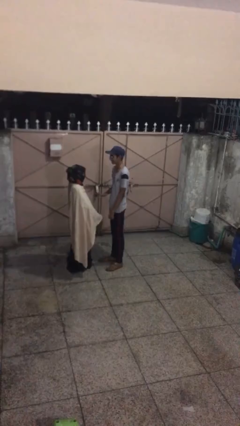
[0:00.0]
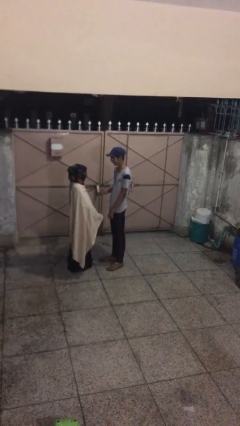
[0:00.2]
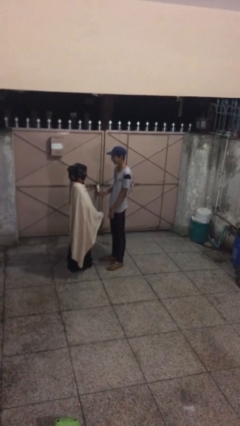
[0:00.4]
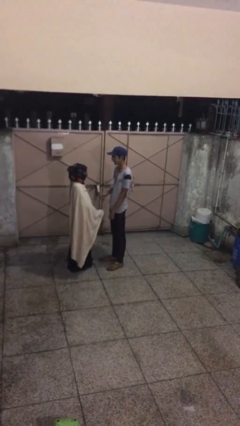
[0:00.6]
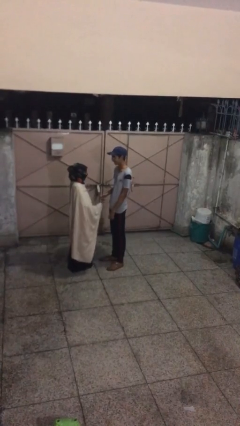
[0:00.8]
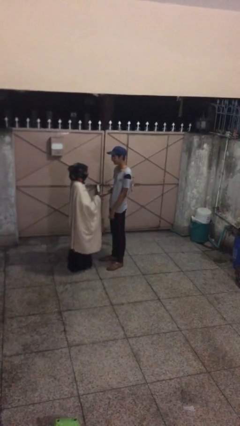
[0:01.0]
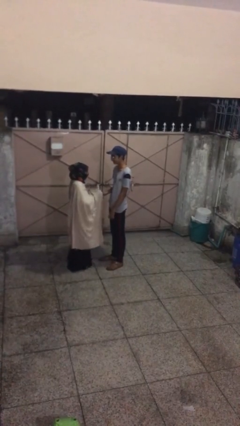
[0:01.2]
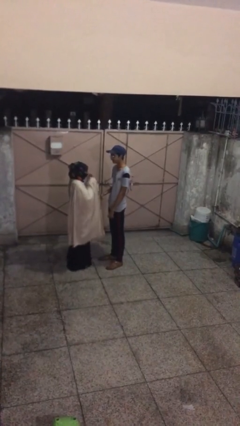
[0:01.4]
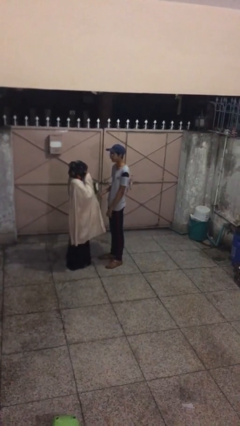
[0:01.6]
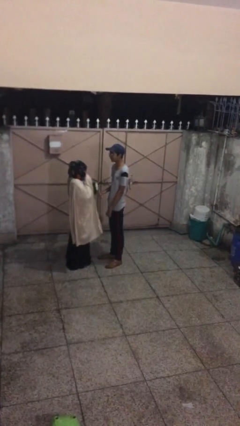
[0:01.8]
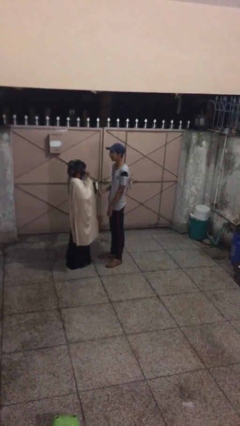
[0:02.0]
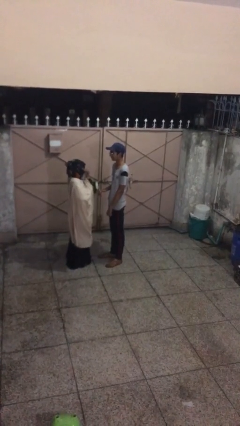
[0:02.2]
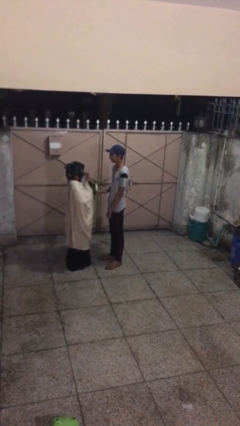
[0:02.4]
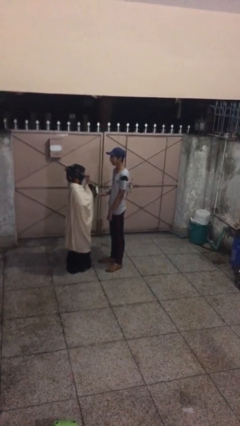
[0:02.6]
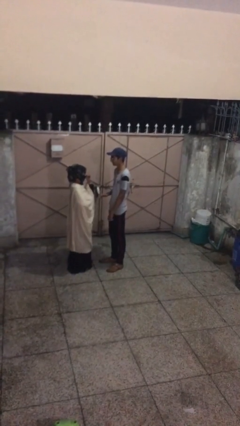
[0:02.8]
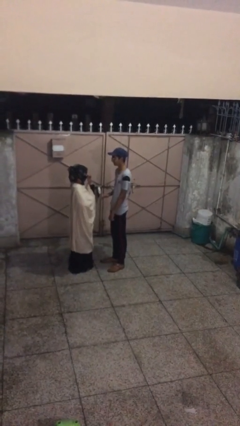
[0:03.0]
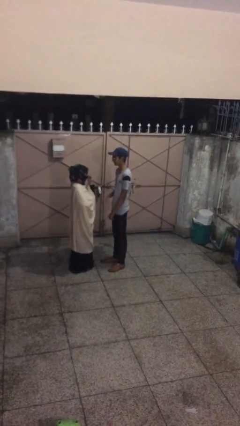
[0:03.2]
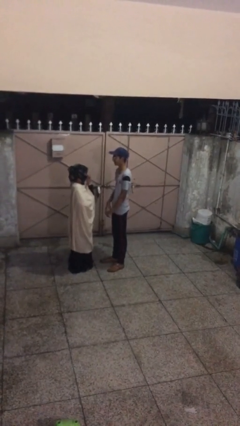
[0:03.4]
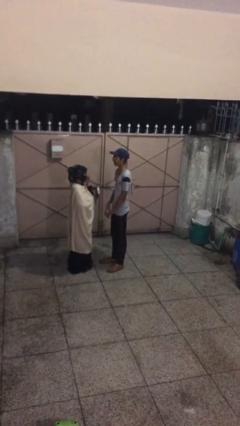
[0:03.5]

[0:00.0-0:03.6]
person talks to person

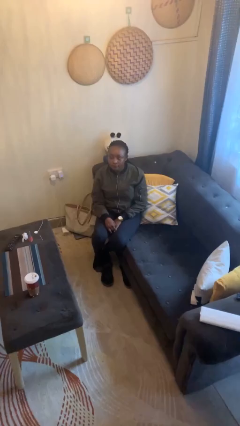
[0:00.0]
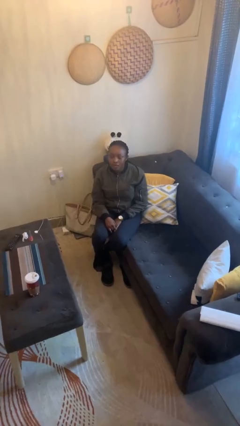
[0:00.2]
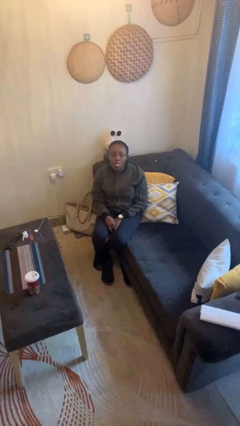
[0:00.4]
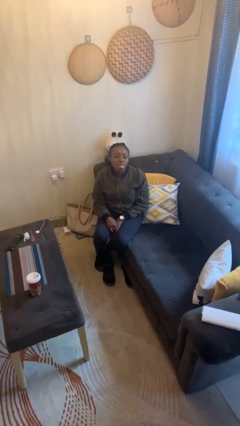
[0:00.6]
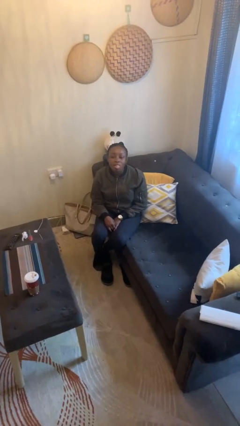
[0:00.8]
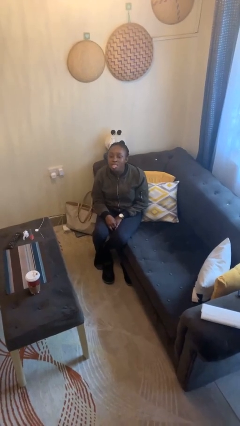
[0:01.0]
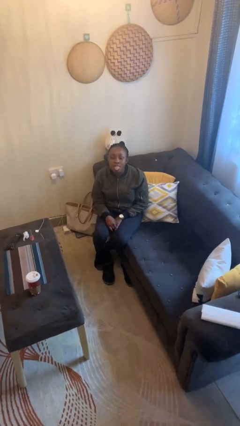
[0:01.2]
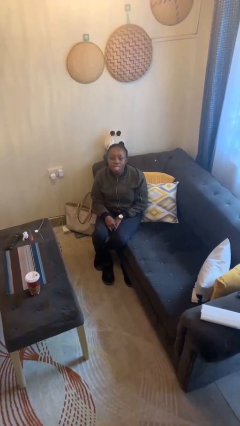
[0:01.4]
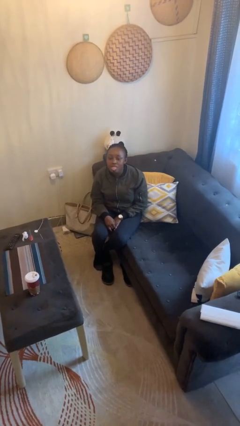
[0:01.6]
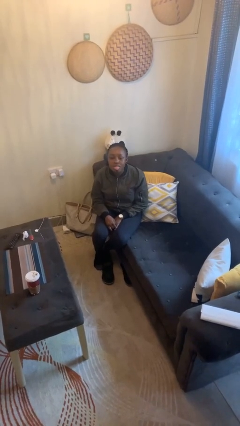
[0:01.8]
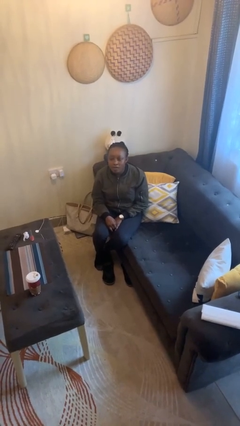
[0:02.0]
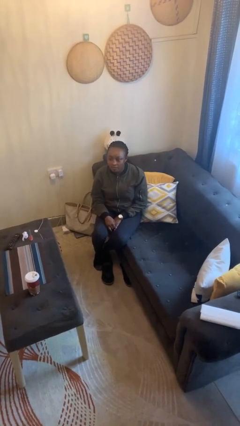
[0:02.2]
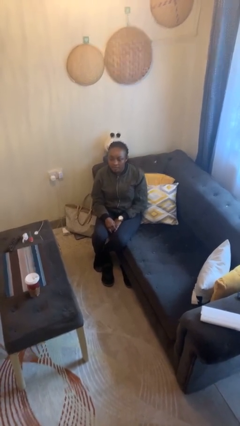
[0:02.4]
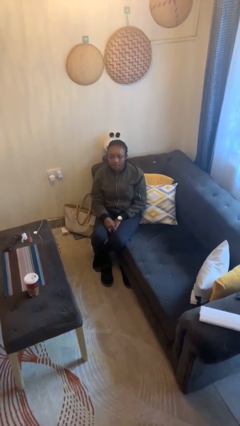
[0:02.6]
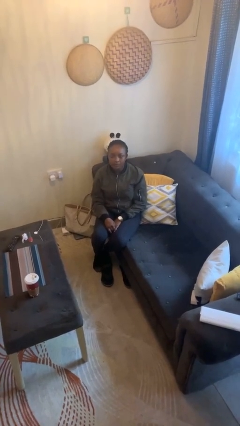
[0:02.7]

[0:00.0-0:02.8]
person sticks out tongue

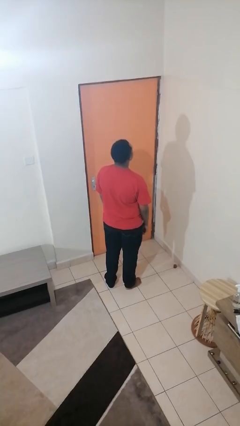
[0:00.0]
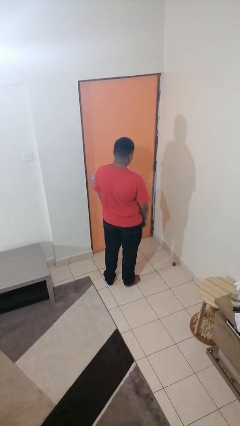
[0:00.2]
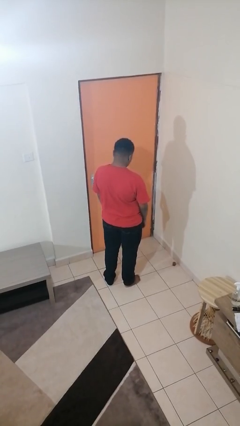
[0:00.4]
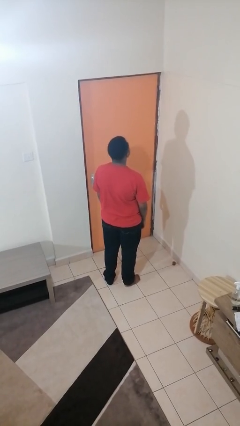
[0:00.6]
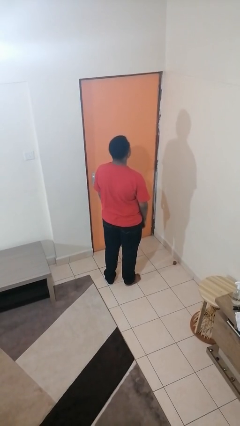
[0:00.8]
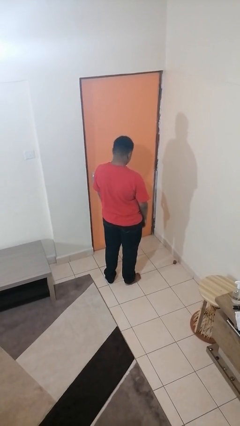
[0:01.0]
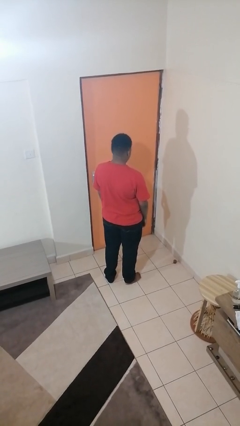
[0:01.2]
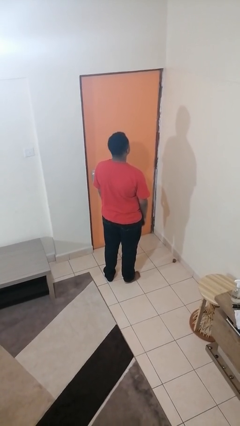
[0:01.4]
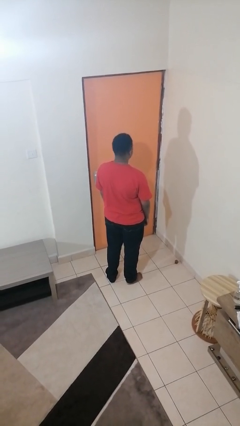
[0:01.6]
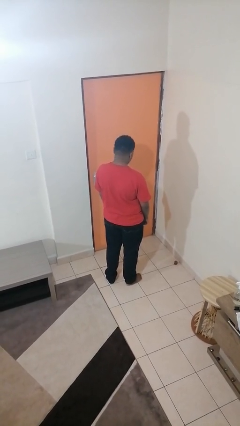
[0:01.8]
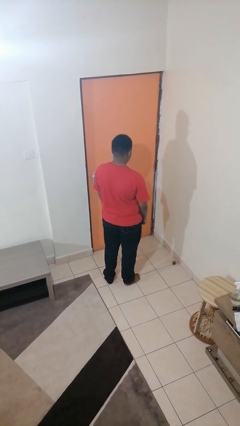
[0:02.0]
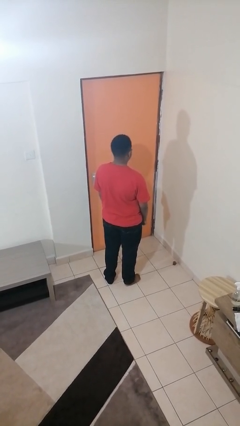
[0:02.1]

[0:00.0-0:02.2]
person nods head

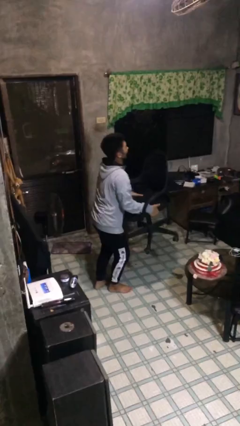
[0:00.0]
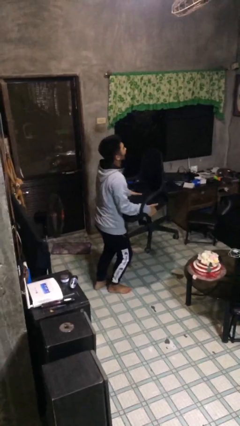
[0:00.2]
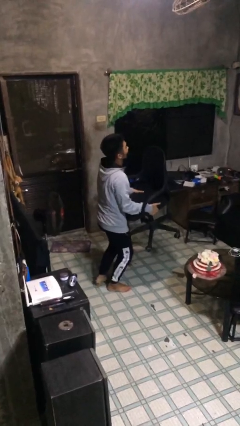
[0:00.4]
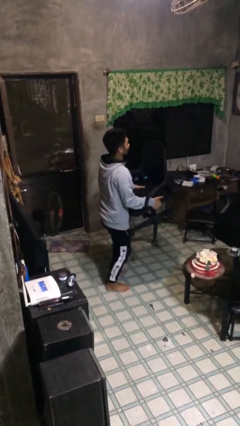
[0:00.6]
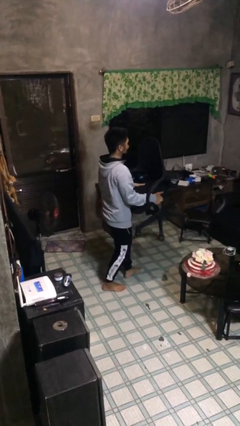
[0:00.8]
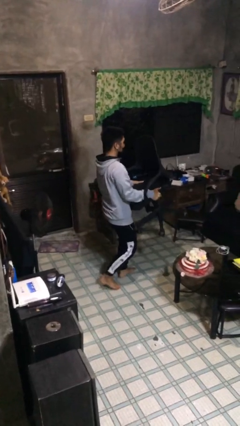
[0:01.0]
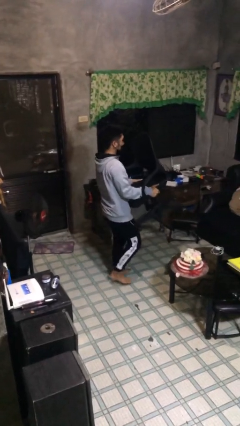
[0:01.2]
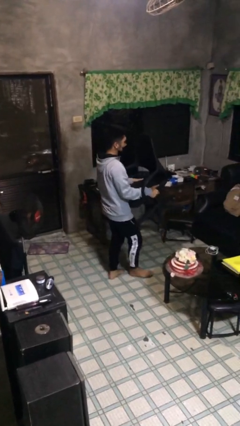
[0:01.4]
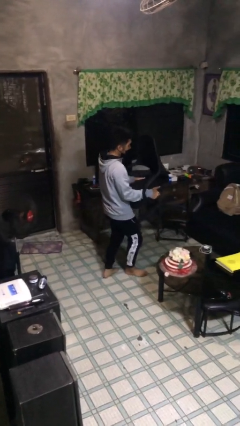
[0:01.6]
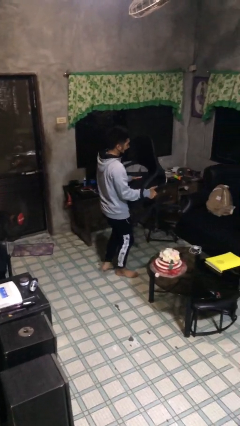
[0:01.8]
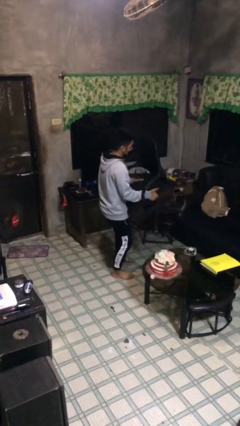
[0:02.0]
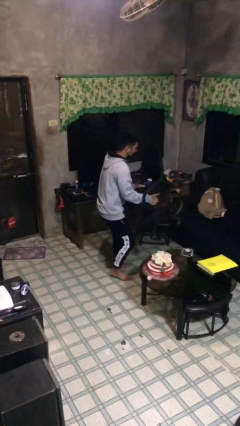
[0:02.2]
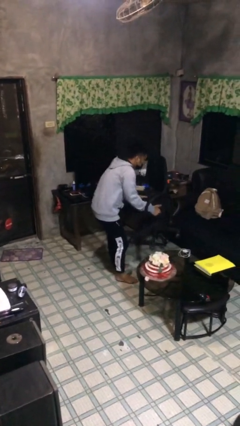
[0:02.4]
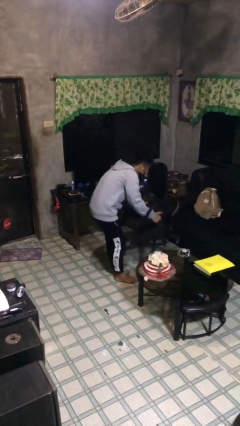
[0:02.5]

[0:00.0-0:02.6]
person carries heavy object

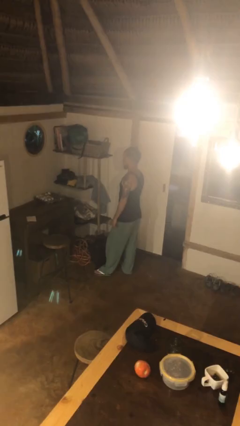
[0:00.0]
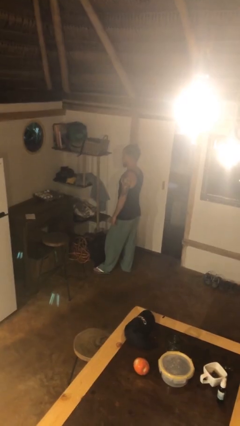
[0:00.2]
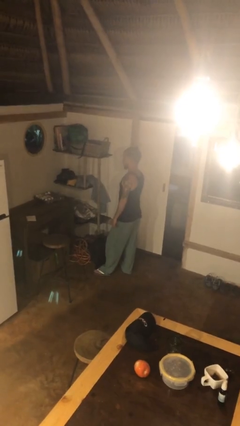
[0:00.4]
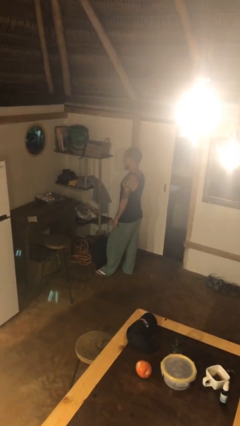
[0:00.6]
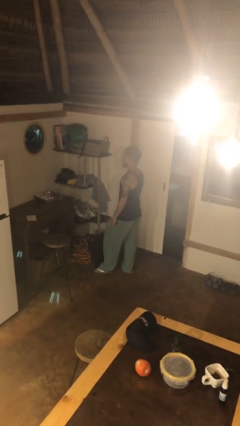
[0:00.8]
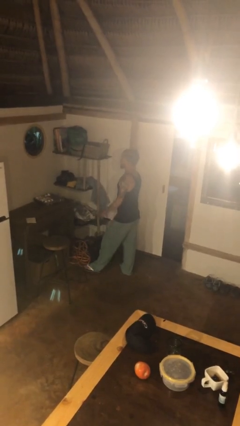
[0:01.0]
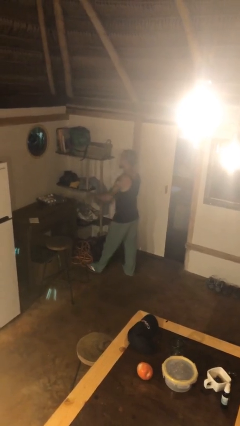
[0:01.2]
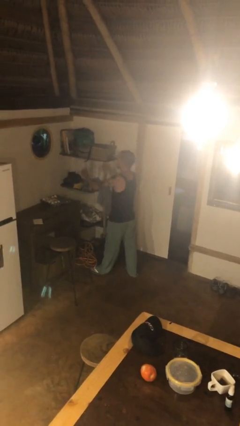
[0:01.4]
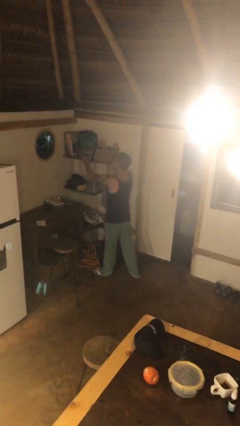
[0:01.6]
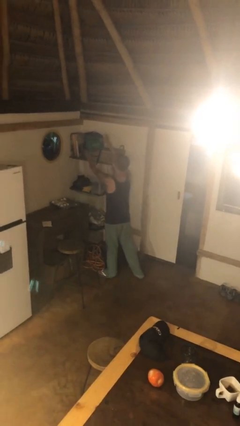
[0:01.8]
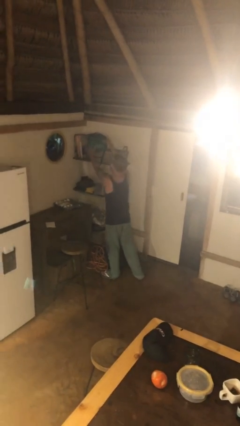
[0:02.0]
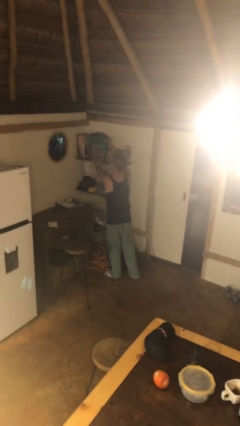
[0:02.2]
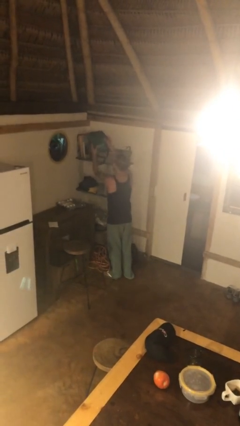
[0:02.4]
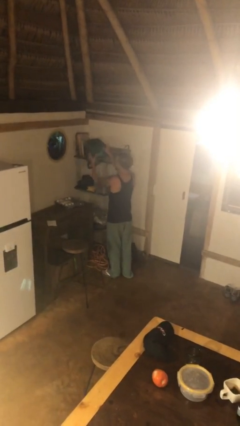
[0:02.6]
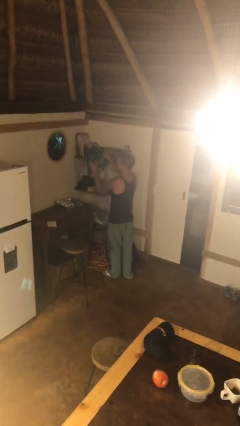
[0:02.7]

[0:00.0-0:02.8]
person picks up object from shelf

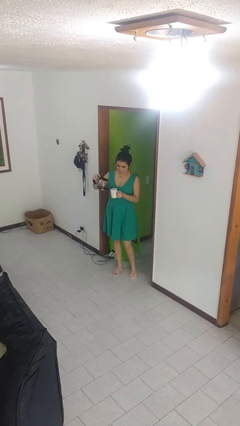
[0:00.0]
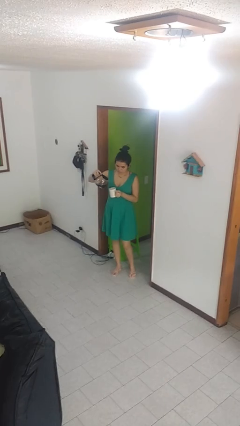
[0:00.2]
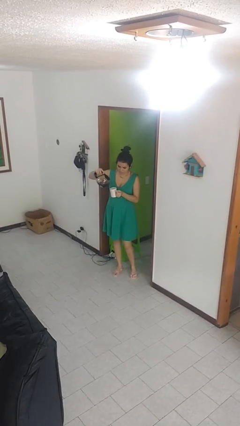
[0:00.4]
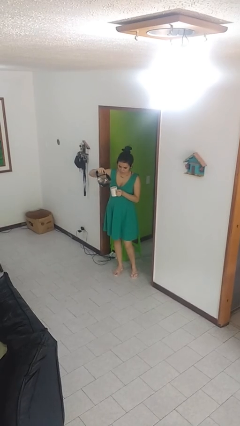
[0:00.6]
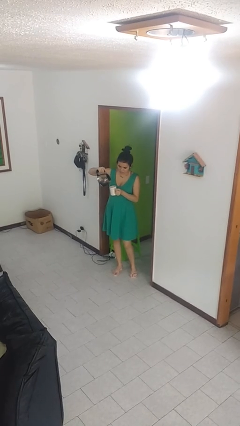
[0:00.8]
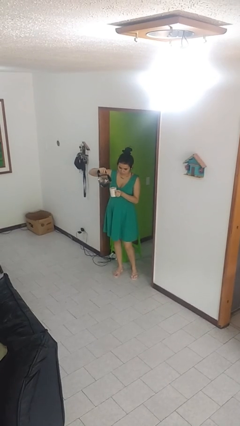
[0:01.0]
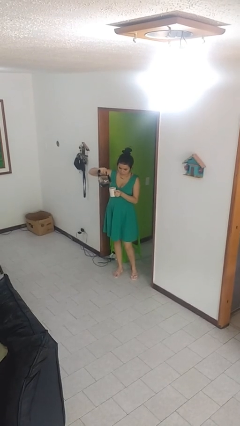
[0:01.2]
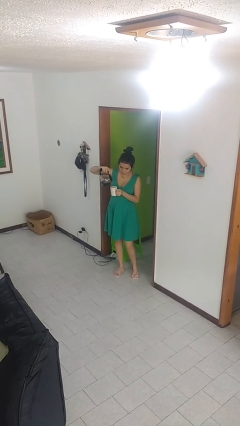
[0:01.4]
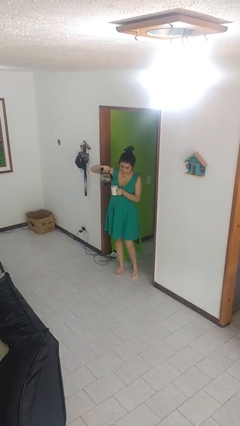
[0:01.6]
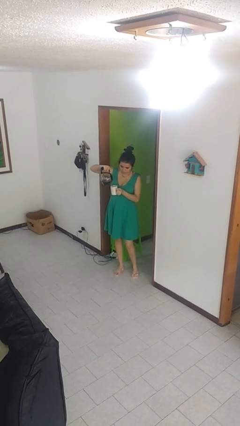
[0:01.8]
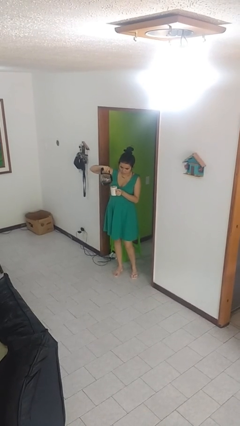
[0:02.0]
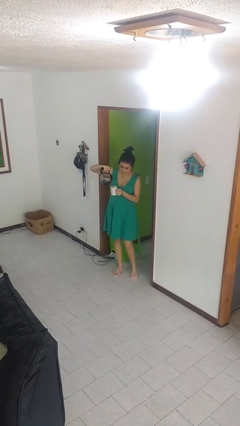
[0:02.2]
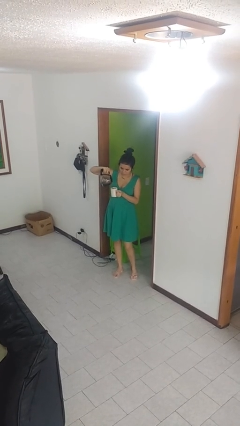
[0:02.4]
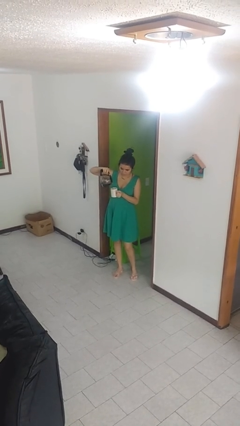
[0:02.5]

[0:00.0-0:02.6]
person pours coffee into mug

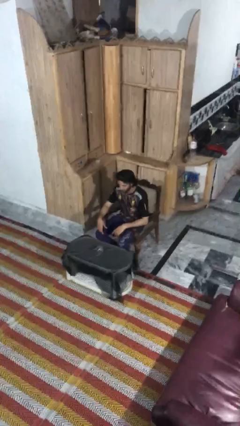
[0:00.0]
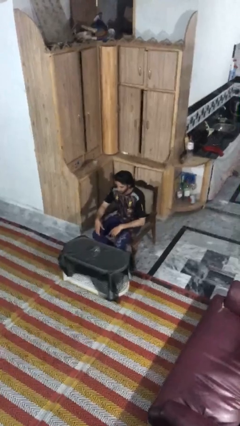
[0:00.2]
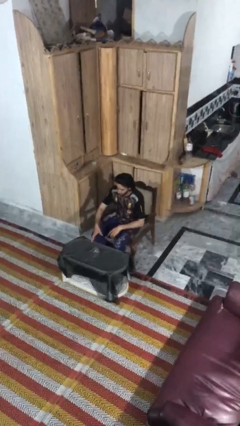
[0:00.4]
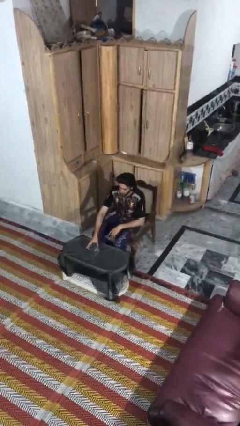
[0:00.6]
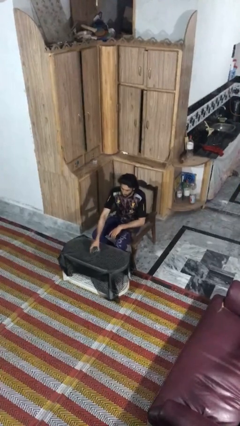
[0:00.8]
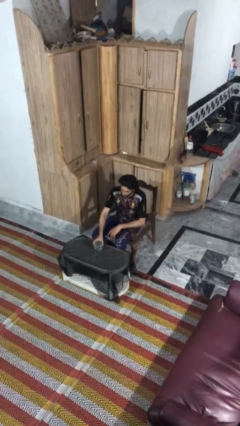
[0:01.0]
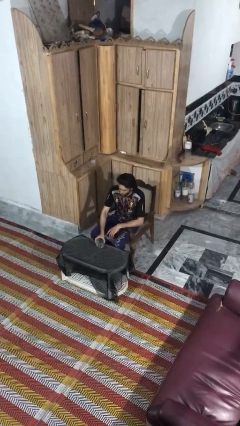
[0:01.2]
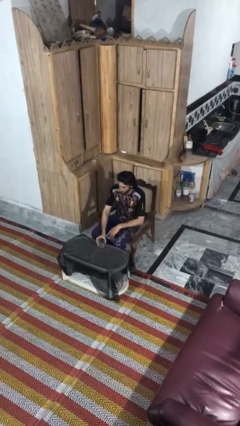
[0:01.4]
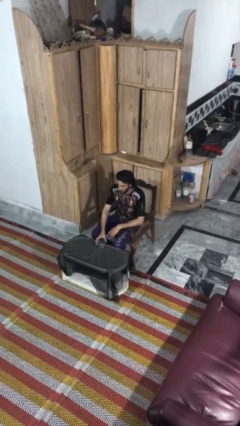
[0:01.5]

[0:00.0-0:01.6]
person sets upright glass
